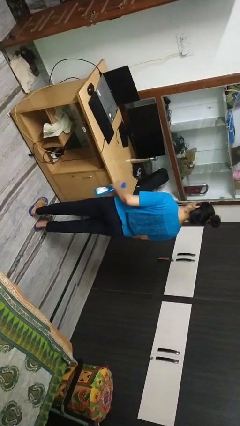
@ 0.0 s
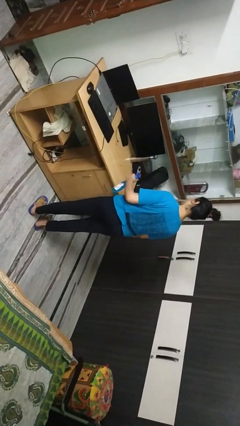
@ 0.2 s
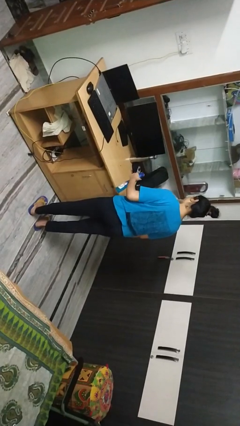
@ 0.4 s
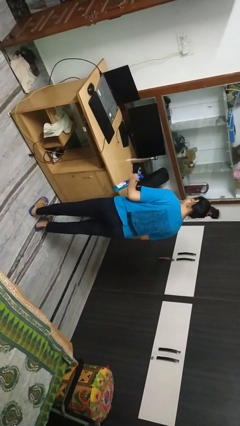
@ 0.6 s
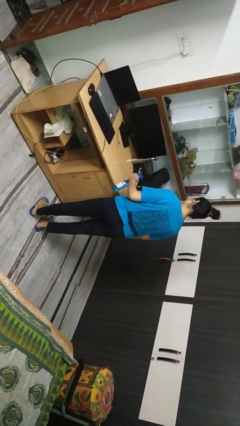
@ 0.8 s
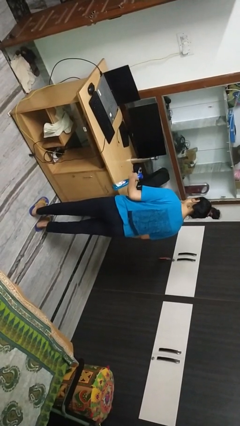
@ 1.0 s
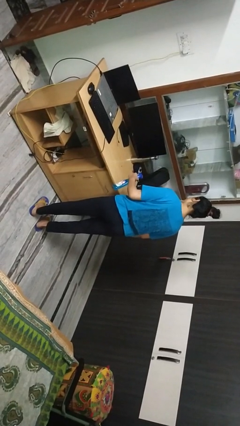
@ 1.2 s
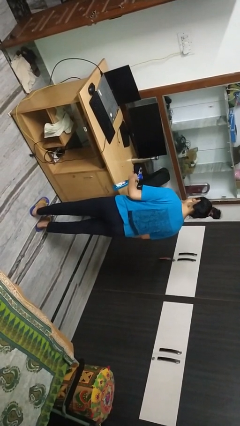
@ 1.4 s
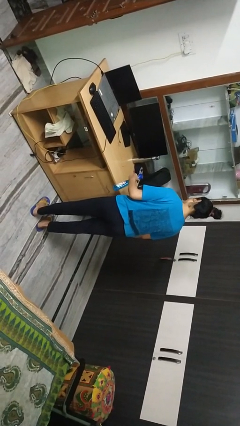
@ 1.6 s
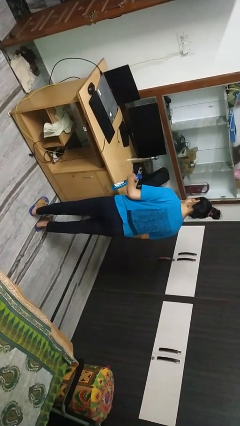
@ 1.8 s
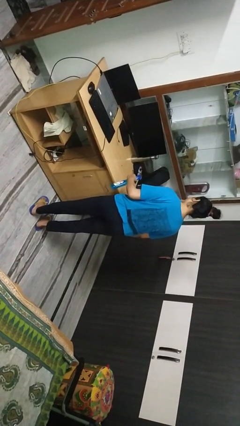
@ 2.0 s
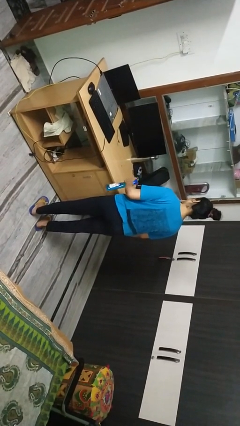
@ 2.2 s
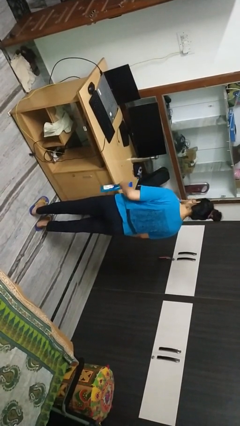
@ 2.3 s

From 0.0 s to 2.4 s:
person sprays from bottle

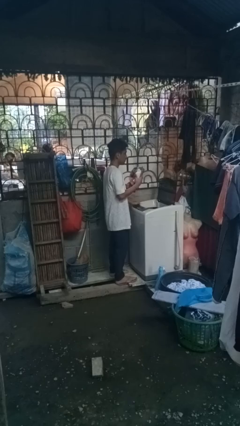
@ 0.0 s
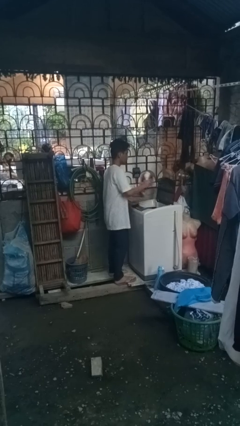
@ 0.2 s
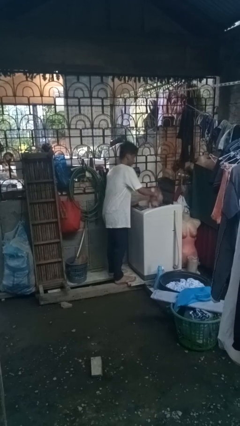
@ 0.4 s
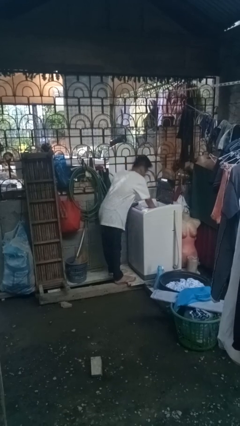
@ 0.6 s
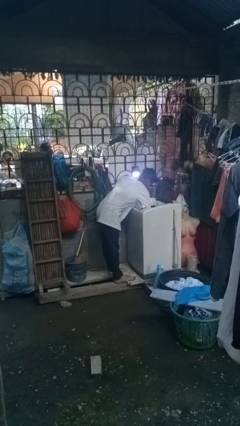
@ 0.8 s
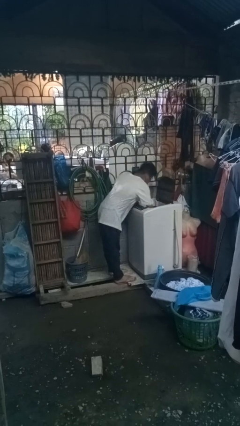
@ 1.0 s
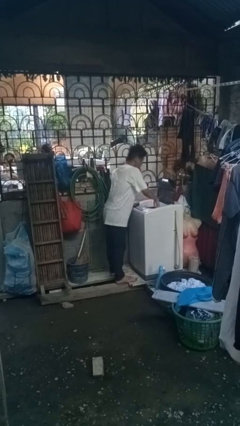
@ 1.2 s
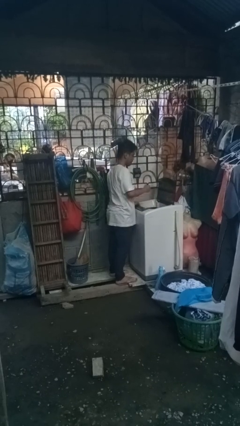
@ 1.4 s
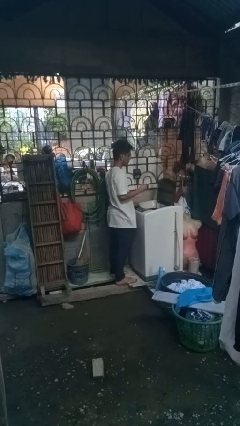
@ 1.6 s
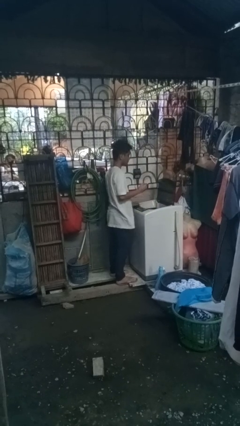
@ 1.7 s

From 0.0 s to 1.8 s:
person loads dryer

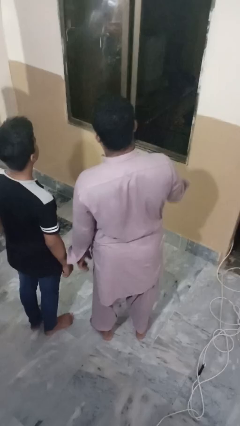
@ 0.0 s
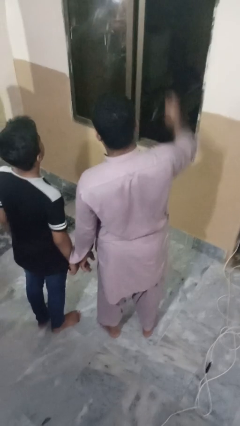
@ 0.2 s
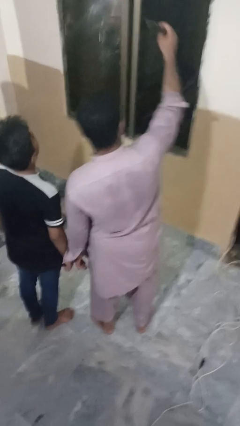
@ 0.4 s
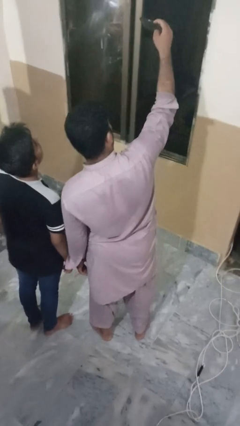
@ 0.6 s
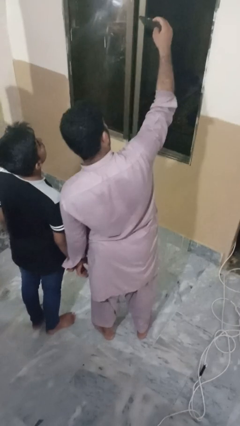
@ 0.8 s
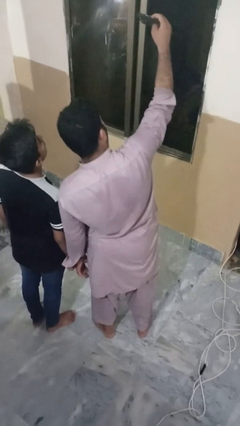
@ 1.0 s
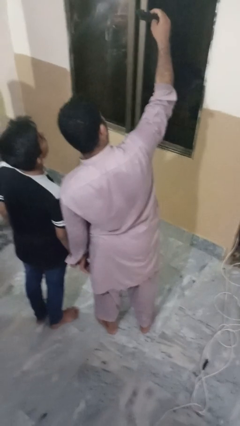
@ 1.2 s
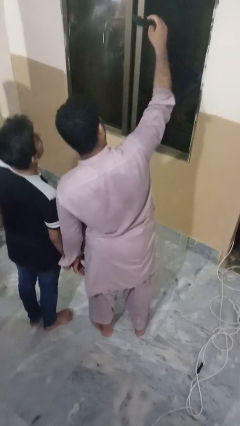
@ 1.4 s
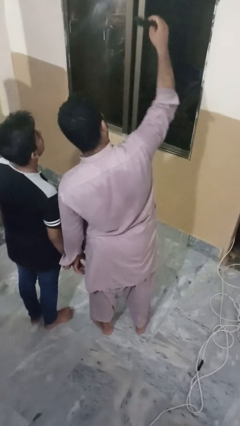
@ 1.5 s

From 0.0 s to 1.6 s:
person takes selfie with person

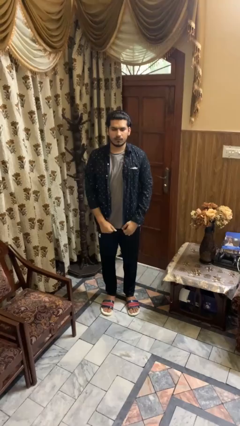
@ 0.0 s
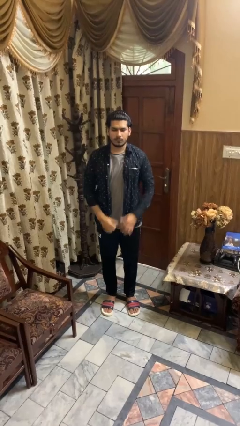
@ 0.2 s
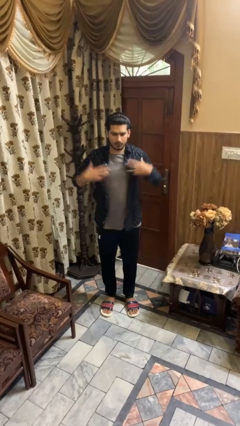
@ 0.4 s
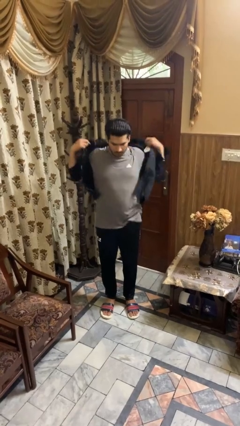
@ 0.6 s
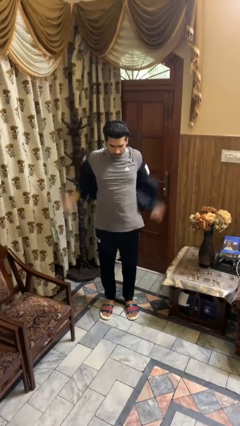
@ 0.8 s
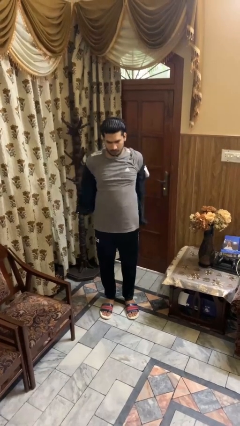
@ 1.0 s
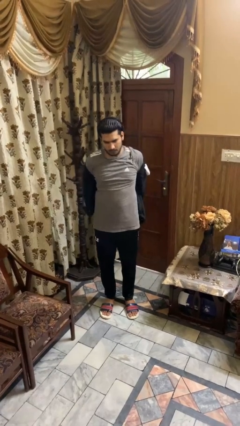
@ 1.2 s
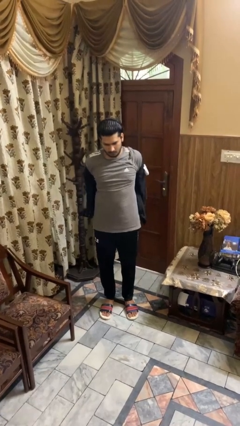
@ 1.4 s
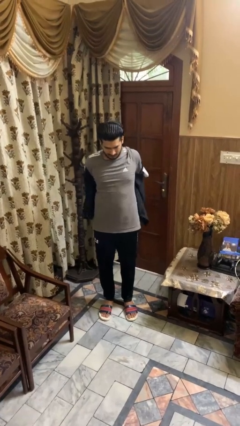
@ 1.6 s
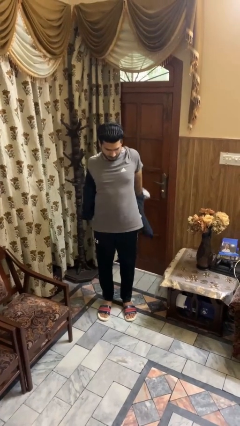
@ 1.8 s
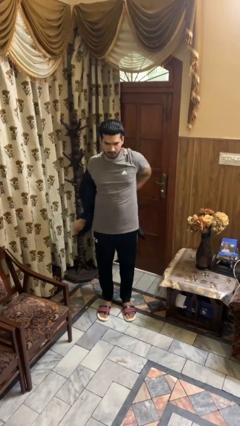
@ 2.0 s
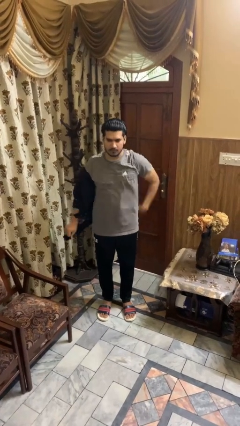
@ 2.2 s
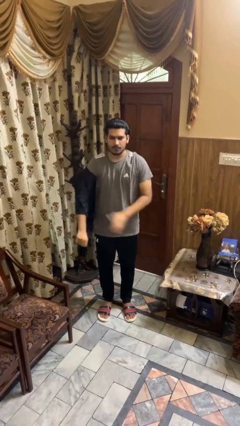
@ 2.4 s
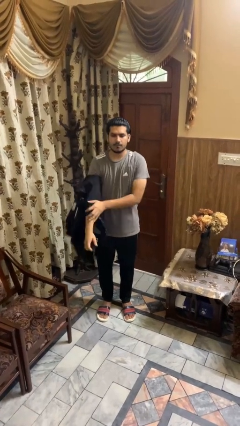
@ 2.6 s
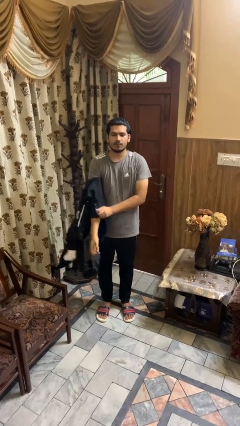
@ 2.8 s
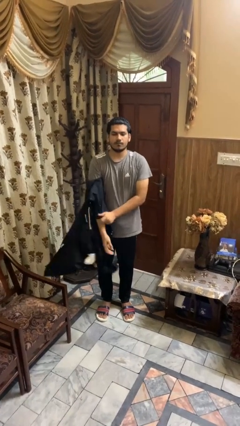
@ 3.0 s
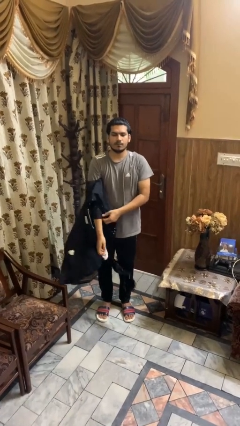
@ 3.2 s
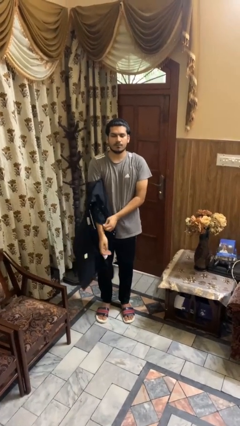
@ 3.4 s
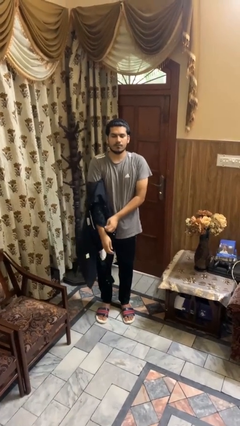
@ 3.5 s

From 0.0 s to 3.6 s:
person takes off shirt

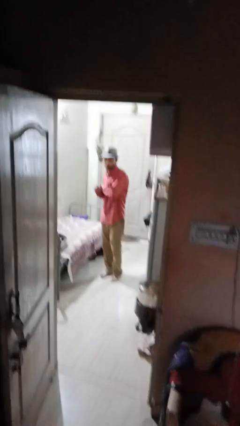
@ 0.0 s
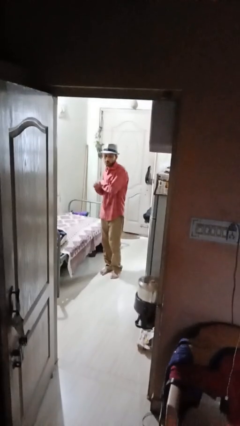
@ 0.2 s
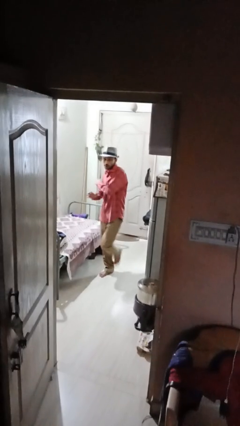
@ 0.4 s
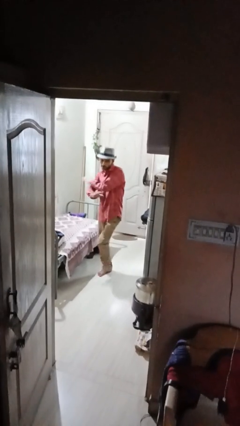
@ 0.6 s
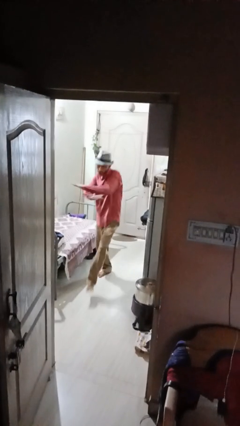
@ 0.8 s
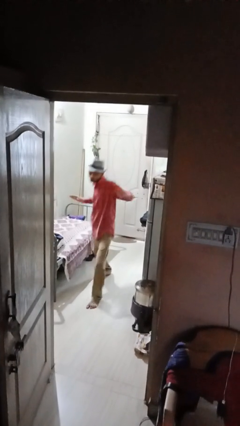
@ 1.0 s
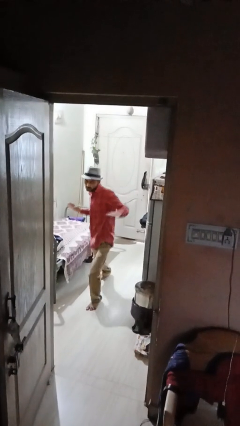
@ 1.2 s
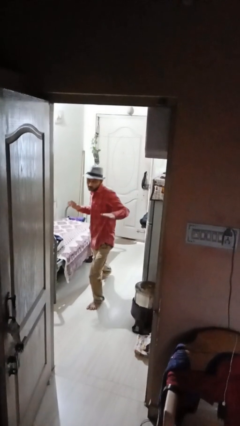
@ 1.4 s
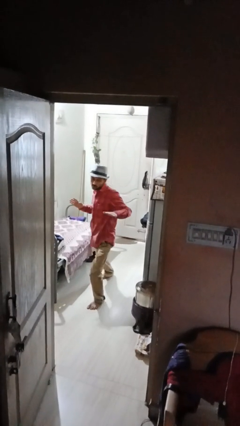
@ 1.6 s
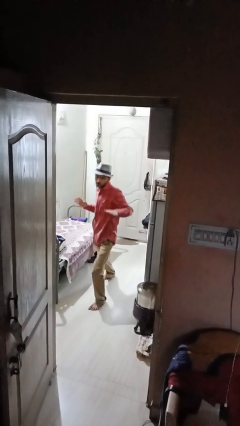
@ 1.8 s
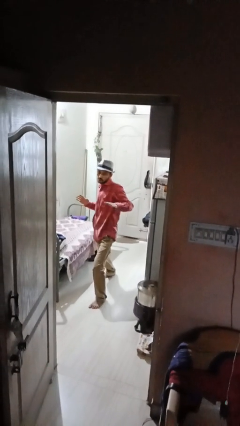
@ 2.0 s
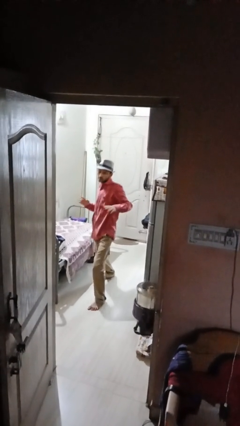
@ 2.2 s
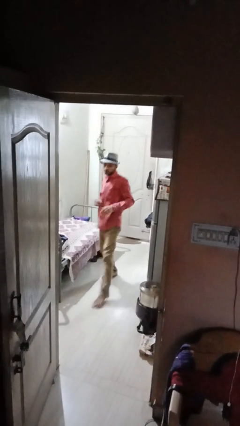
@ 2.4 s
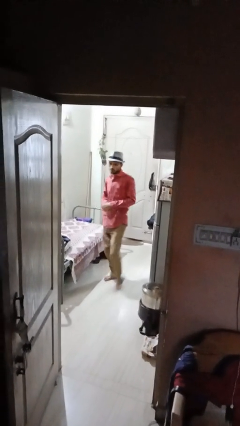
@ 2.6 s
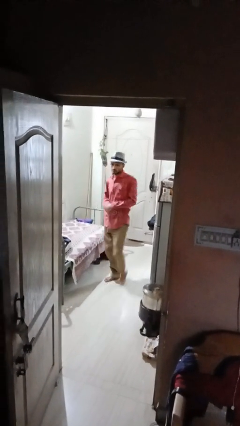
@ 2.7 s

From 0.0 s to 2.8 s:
person karate chop

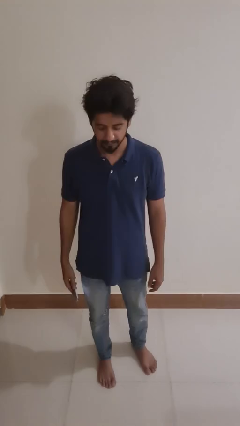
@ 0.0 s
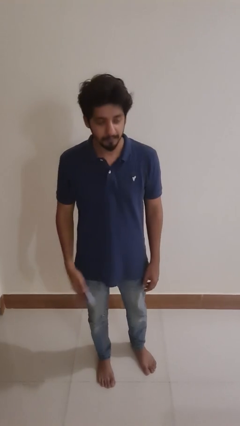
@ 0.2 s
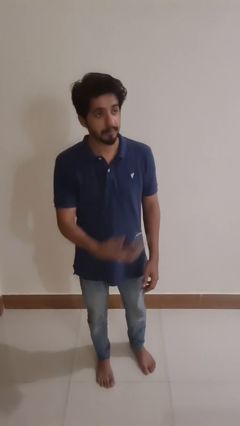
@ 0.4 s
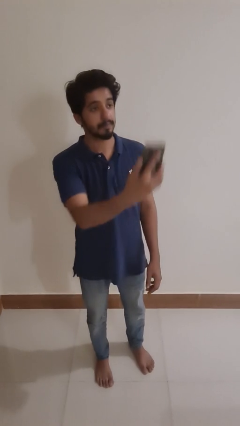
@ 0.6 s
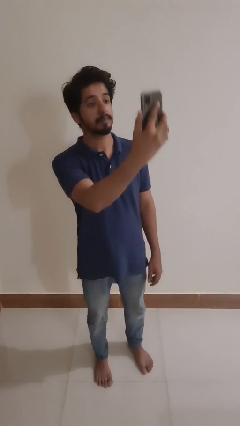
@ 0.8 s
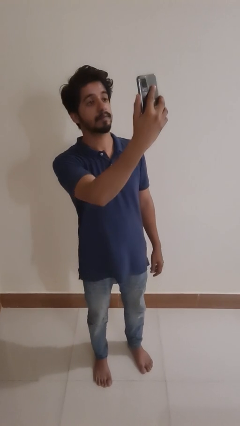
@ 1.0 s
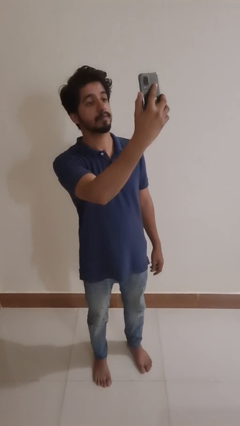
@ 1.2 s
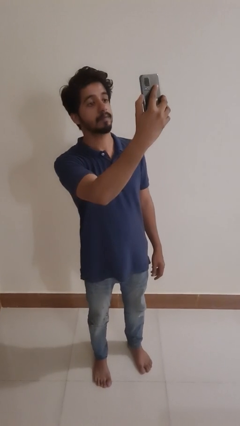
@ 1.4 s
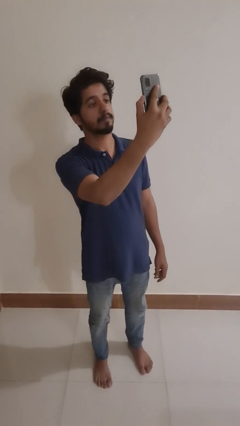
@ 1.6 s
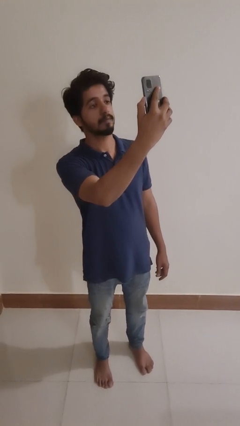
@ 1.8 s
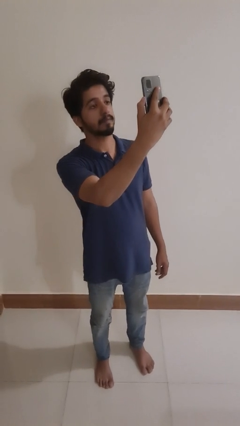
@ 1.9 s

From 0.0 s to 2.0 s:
person takes selfie

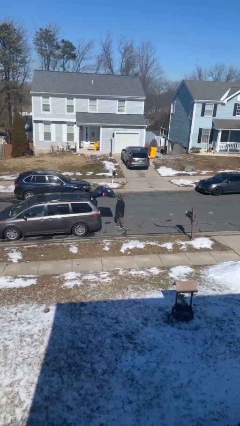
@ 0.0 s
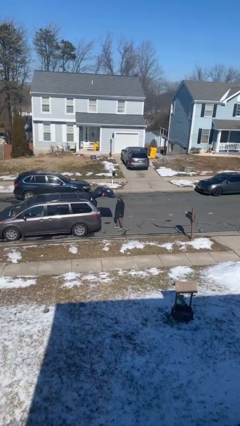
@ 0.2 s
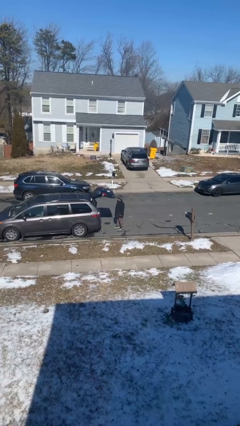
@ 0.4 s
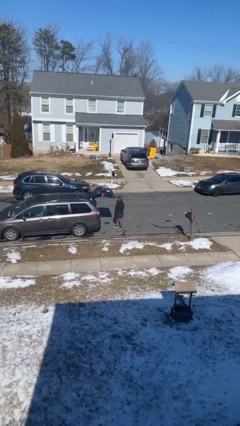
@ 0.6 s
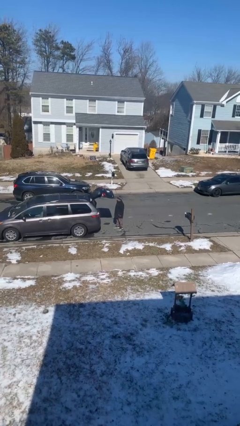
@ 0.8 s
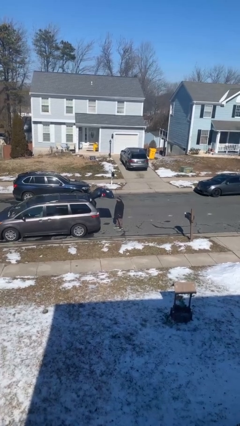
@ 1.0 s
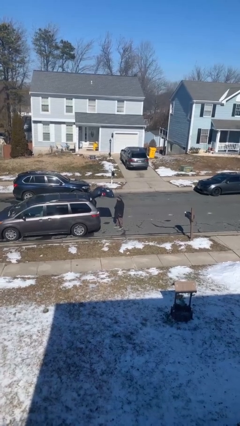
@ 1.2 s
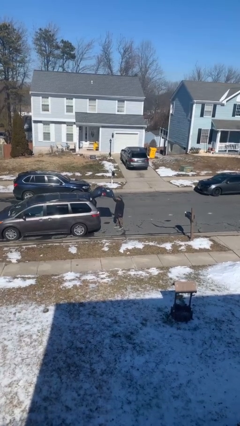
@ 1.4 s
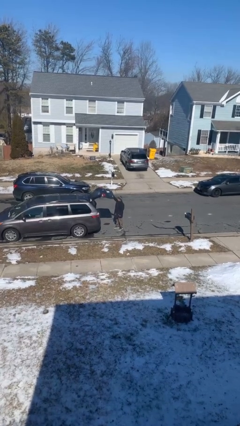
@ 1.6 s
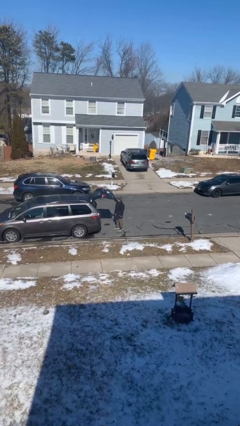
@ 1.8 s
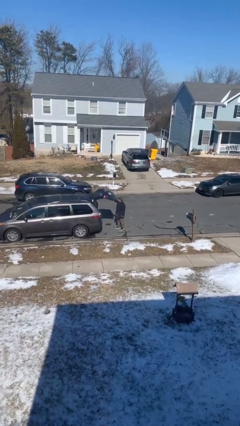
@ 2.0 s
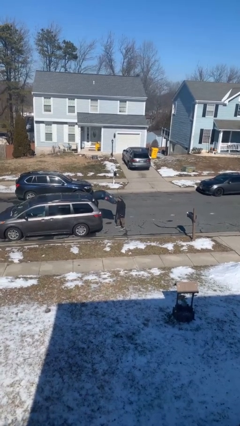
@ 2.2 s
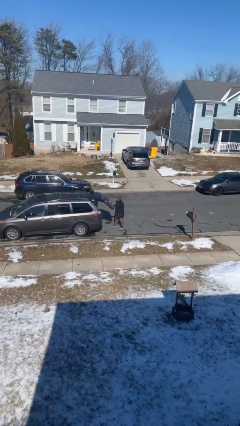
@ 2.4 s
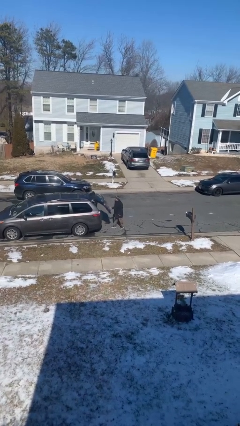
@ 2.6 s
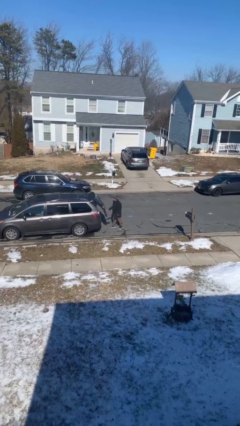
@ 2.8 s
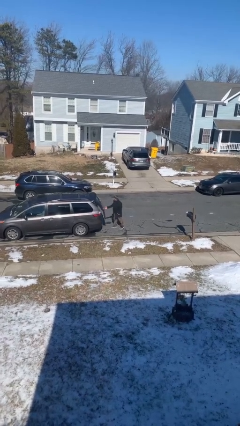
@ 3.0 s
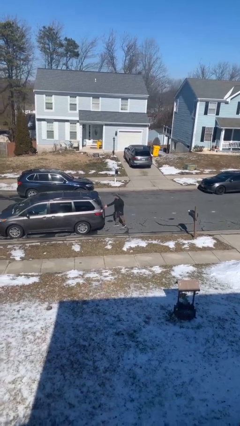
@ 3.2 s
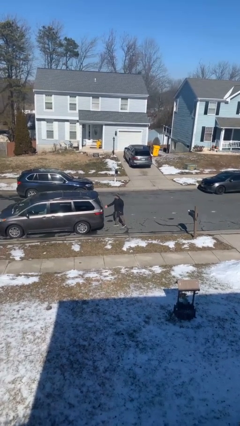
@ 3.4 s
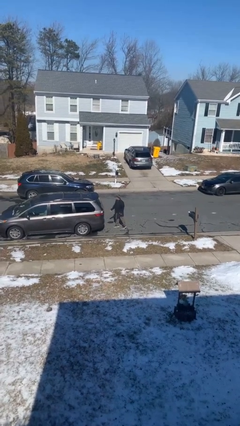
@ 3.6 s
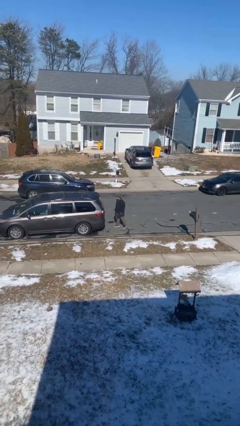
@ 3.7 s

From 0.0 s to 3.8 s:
person closes car trunk
